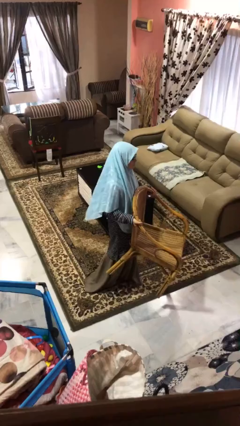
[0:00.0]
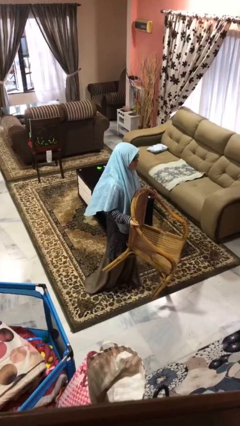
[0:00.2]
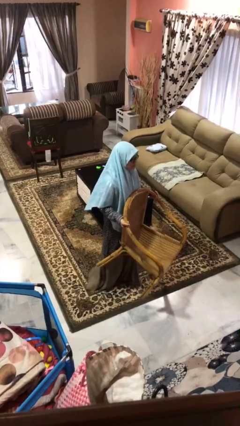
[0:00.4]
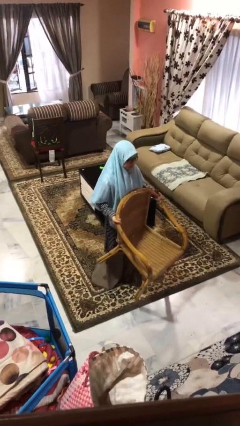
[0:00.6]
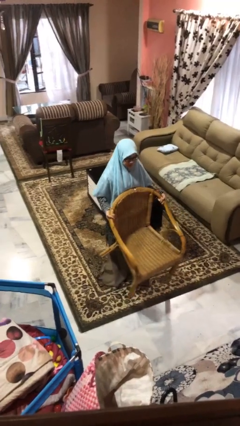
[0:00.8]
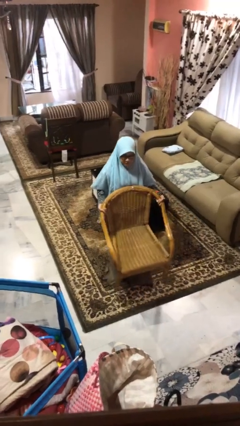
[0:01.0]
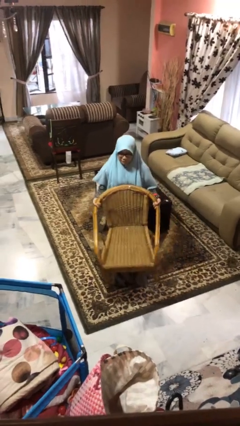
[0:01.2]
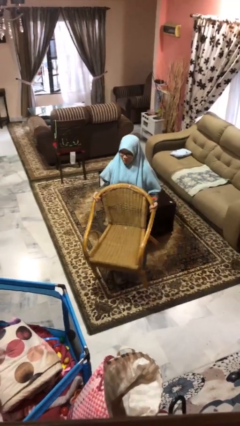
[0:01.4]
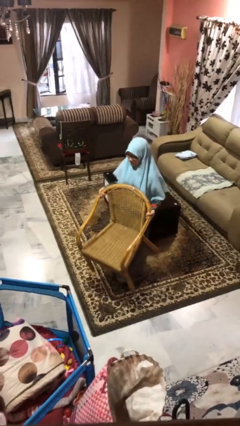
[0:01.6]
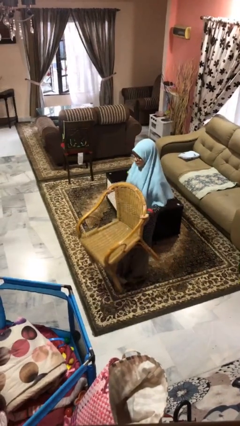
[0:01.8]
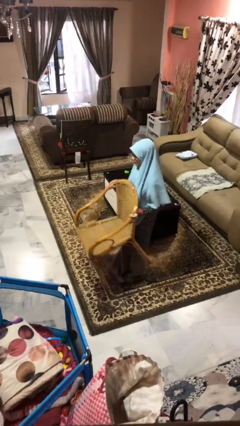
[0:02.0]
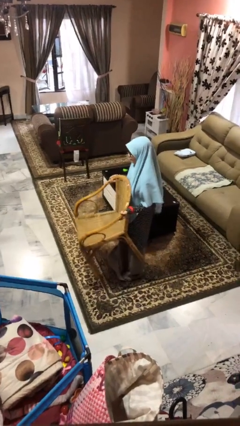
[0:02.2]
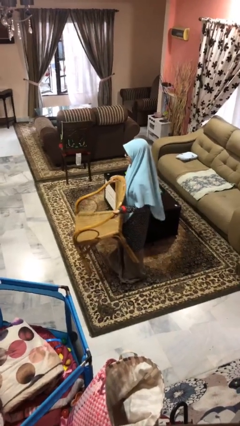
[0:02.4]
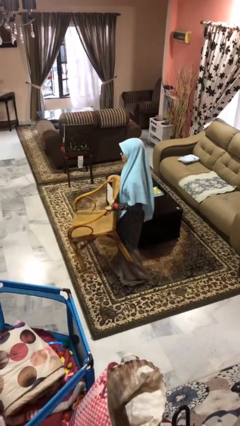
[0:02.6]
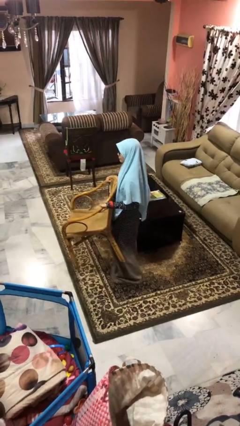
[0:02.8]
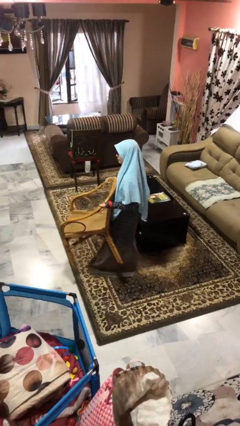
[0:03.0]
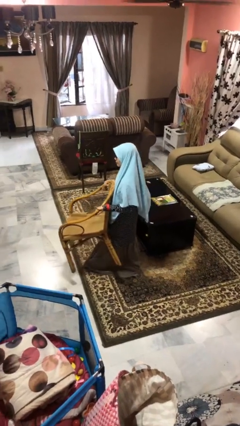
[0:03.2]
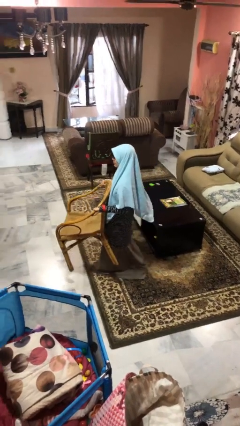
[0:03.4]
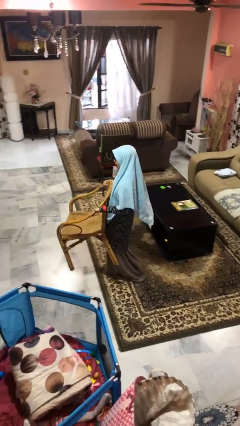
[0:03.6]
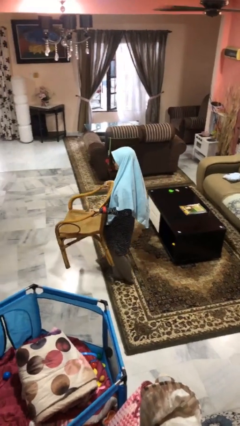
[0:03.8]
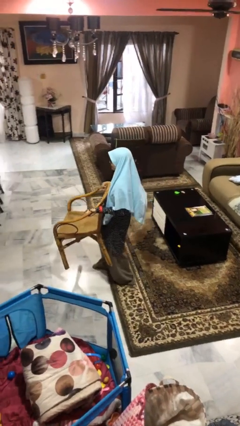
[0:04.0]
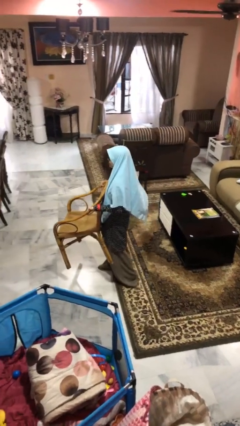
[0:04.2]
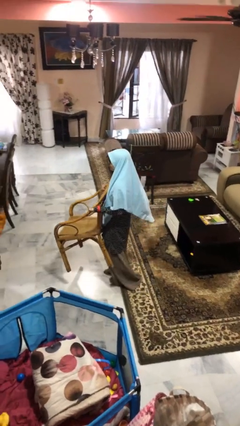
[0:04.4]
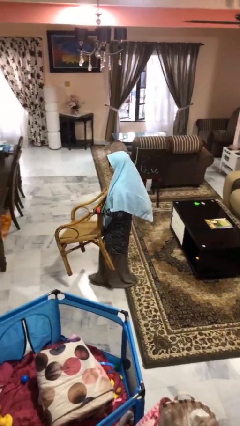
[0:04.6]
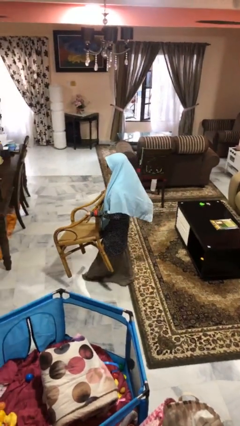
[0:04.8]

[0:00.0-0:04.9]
person carries furniture

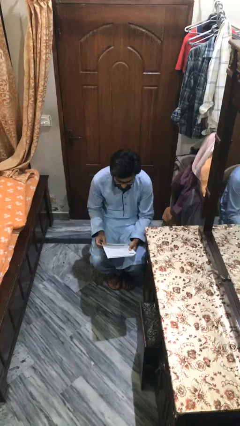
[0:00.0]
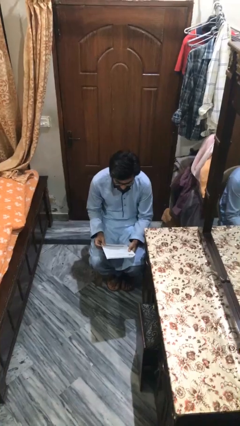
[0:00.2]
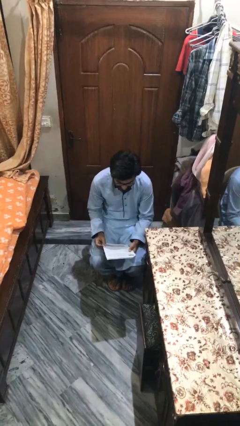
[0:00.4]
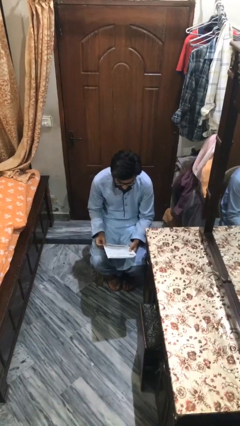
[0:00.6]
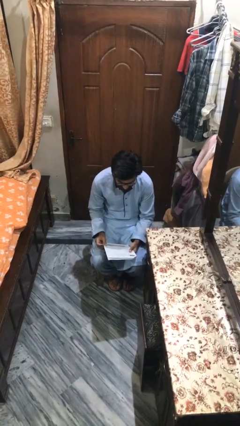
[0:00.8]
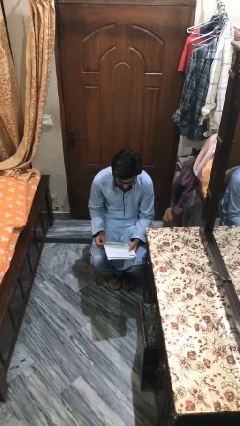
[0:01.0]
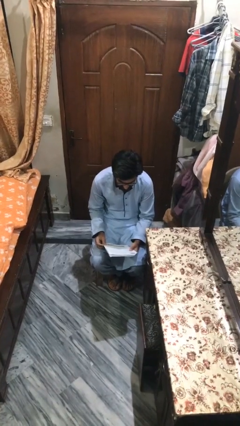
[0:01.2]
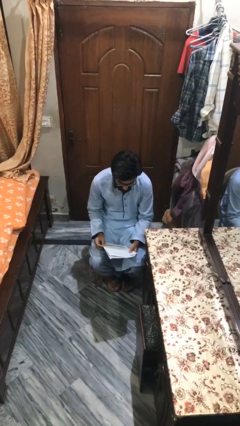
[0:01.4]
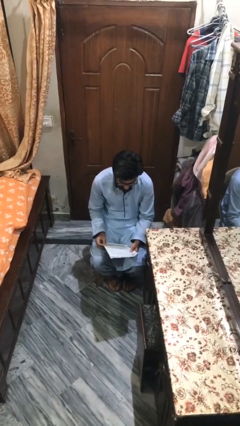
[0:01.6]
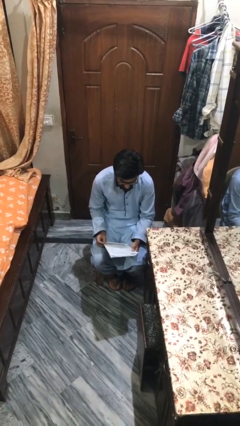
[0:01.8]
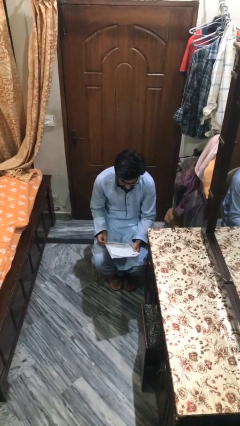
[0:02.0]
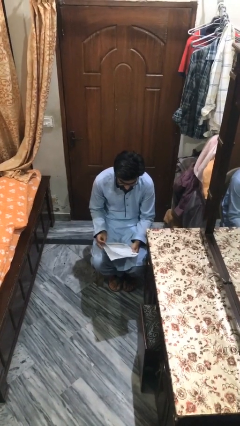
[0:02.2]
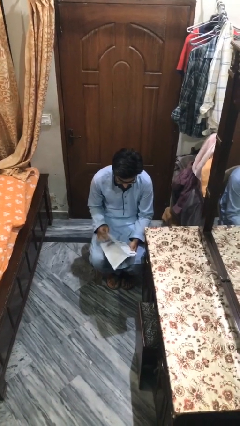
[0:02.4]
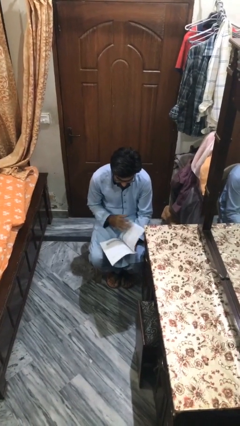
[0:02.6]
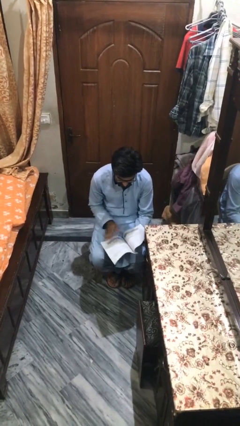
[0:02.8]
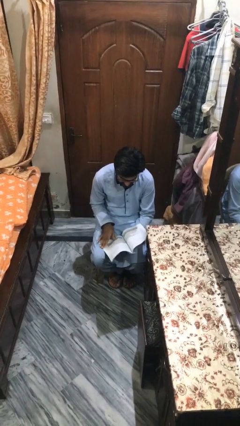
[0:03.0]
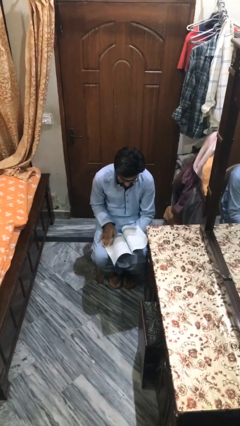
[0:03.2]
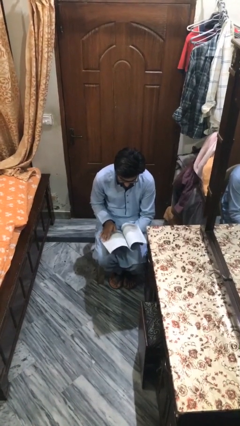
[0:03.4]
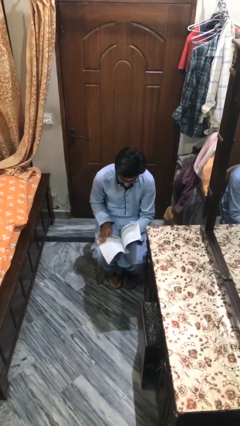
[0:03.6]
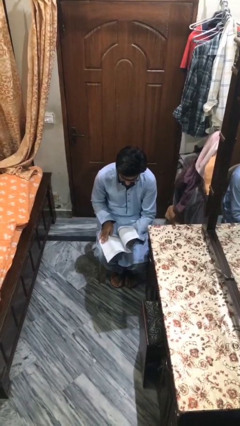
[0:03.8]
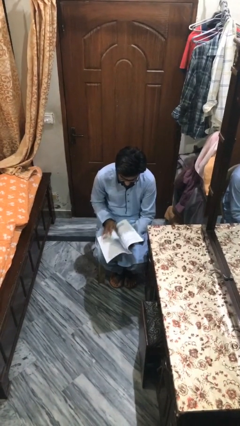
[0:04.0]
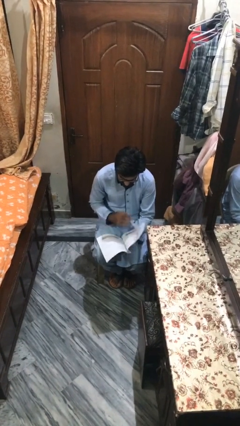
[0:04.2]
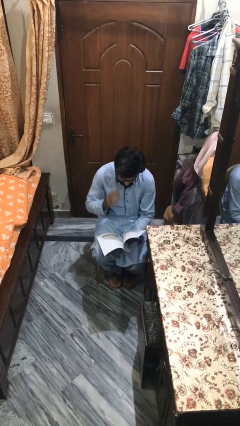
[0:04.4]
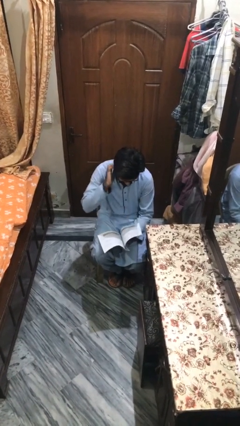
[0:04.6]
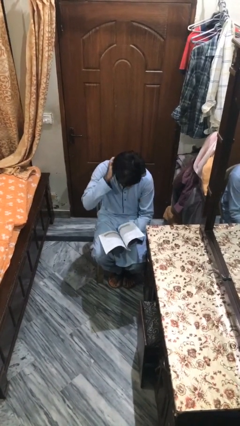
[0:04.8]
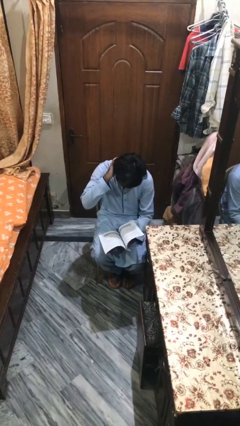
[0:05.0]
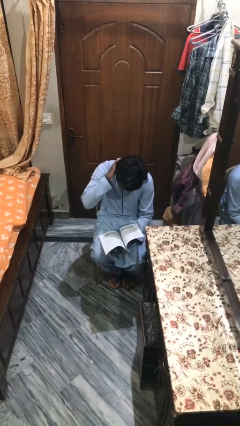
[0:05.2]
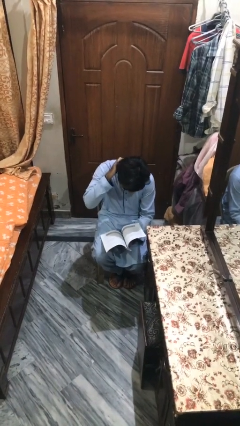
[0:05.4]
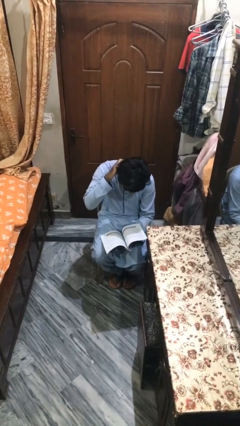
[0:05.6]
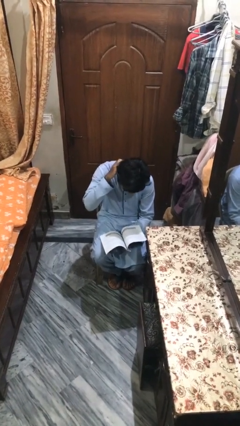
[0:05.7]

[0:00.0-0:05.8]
person reads document

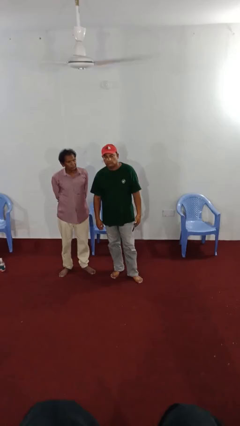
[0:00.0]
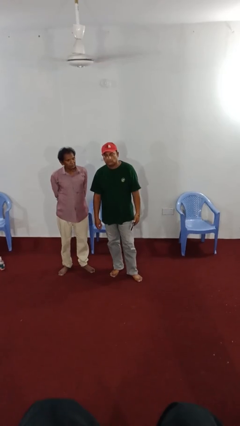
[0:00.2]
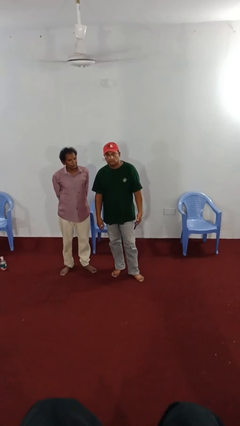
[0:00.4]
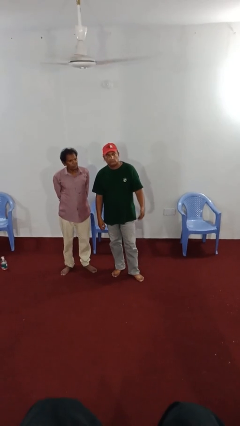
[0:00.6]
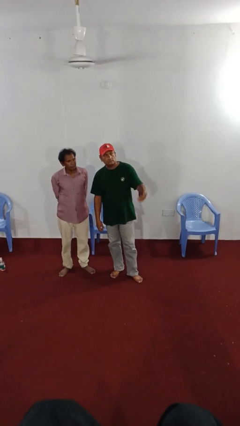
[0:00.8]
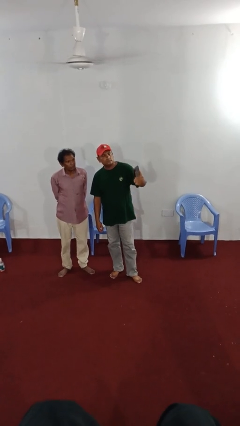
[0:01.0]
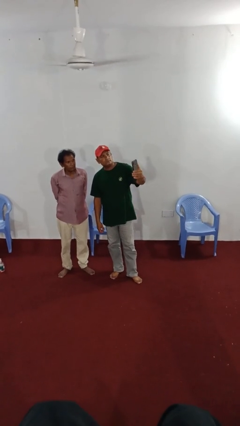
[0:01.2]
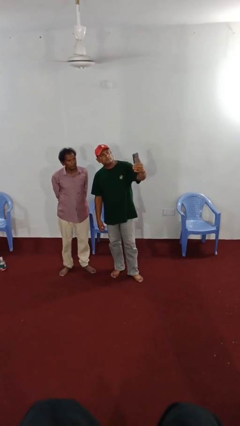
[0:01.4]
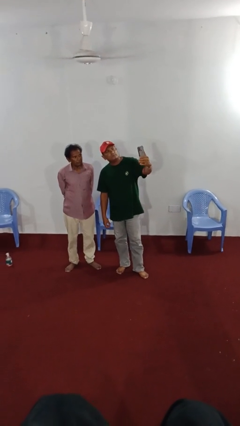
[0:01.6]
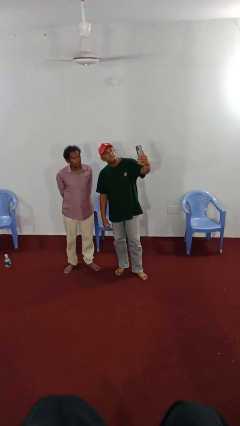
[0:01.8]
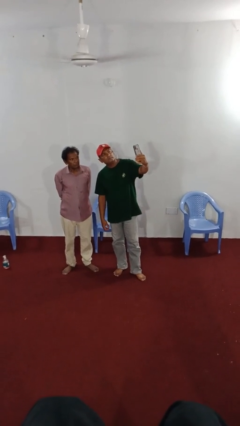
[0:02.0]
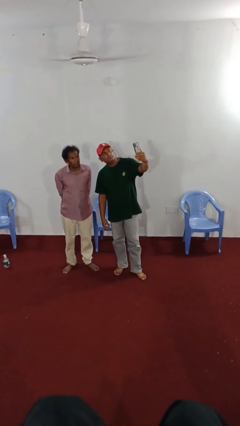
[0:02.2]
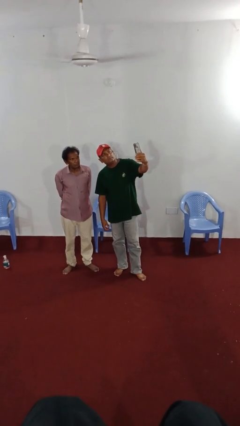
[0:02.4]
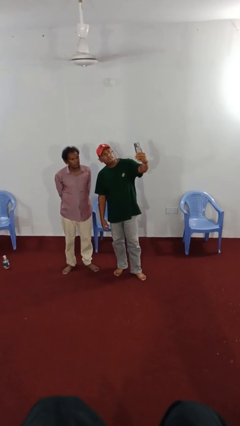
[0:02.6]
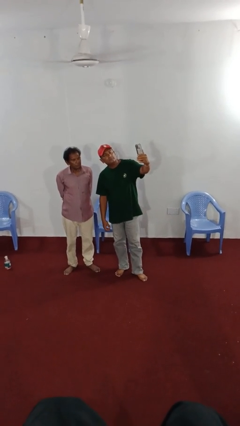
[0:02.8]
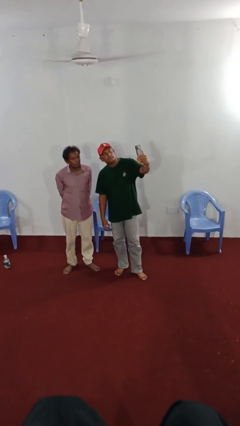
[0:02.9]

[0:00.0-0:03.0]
person takes selfie with person

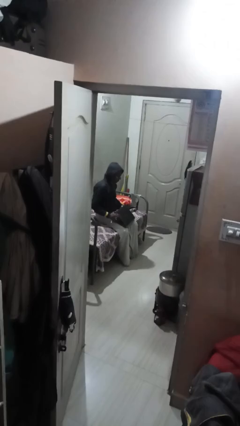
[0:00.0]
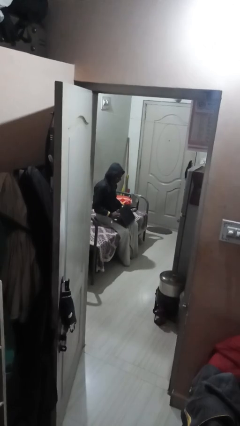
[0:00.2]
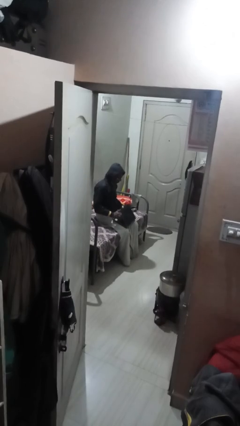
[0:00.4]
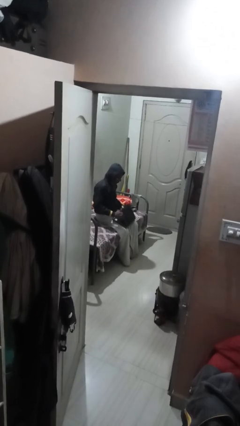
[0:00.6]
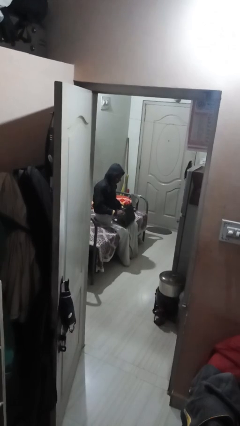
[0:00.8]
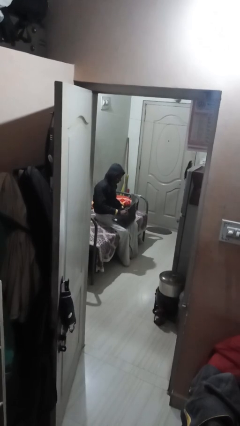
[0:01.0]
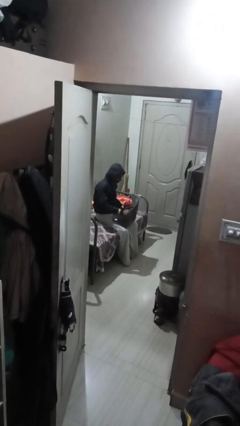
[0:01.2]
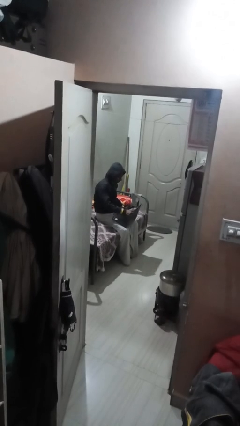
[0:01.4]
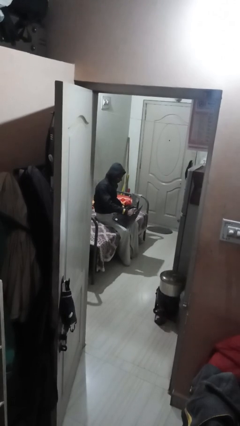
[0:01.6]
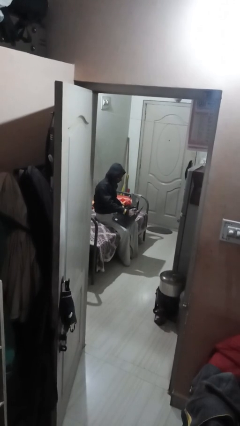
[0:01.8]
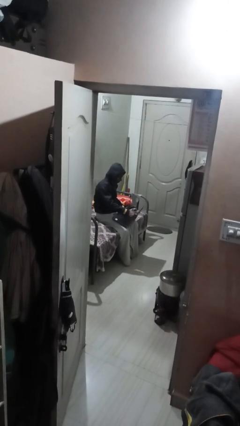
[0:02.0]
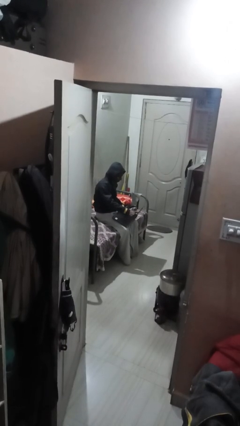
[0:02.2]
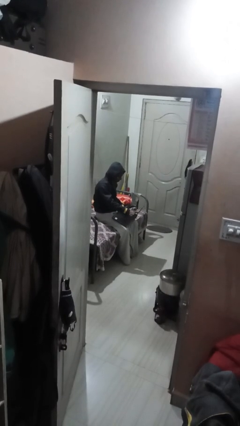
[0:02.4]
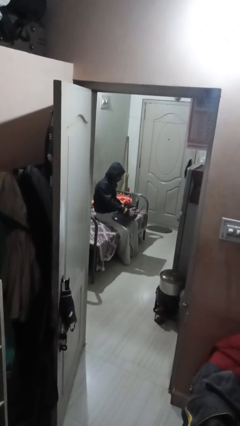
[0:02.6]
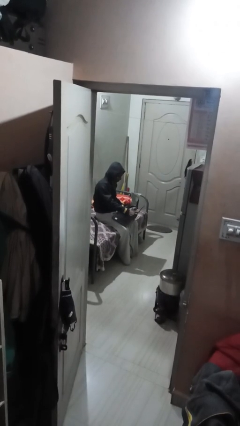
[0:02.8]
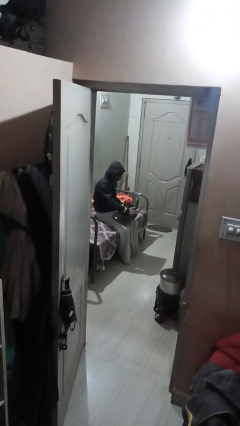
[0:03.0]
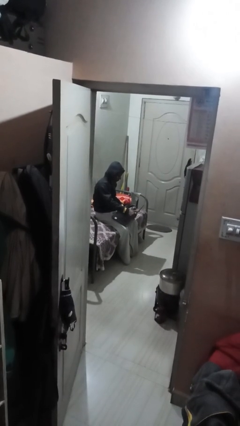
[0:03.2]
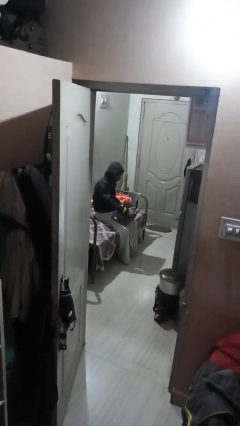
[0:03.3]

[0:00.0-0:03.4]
person interacts with laptop

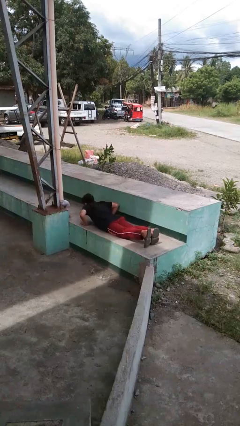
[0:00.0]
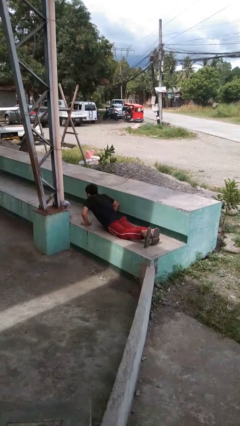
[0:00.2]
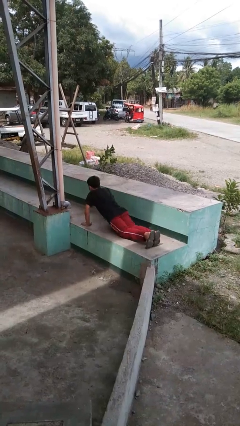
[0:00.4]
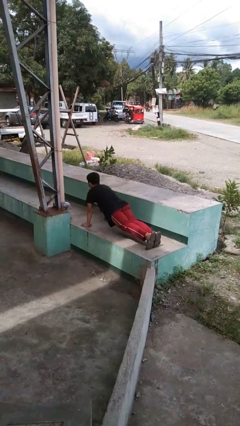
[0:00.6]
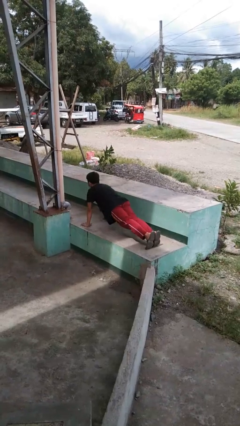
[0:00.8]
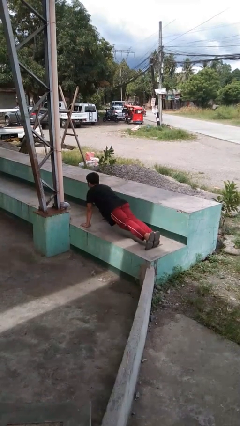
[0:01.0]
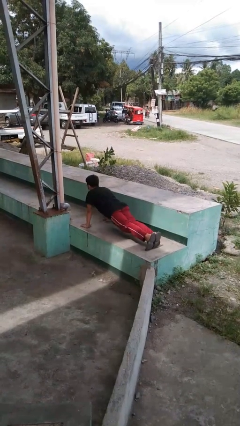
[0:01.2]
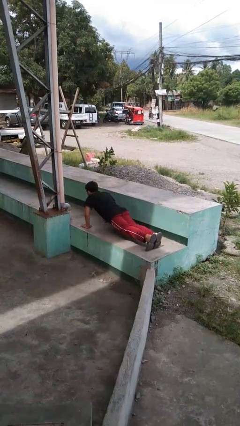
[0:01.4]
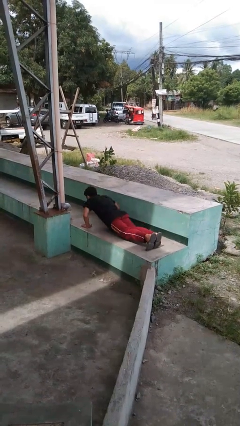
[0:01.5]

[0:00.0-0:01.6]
person exercises with pushup
